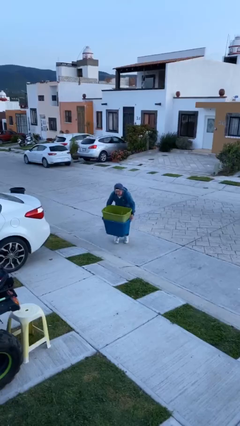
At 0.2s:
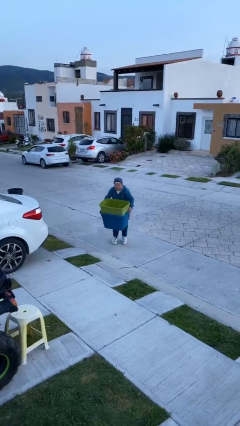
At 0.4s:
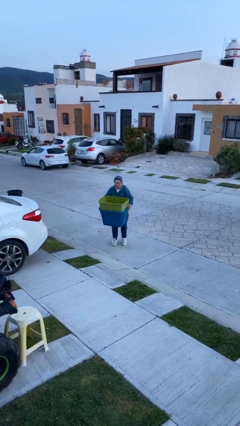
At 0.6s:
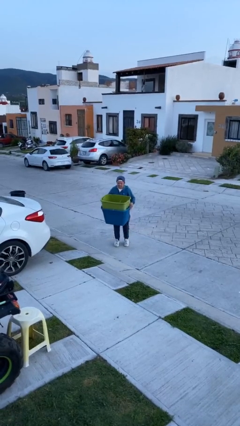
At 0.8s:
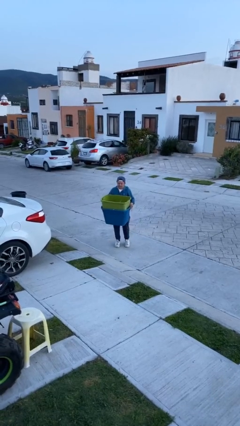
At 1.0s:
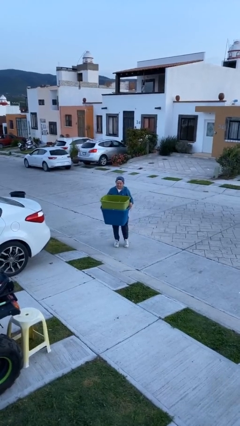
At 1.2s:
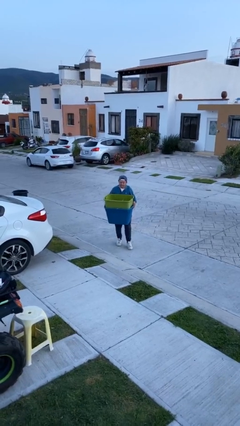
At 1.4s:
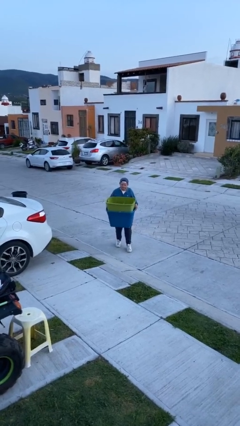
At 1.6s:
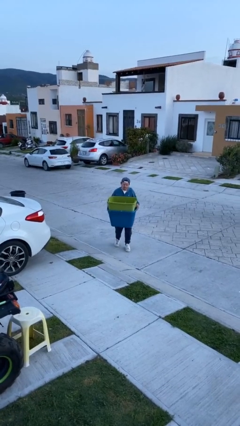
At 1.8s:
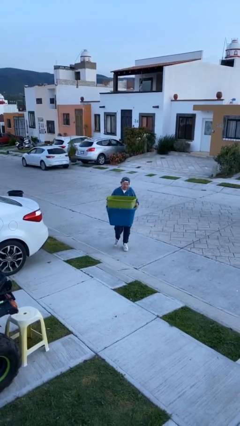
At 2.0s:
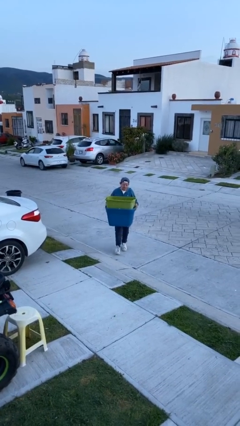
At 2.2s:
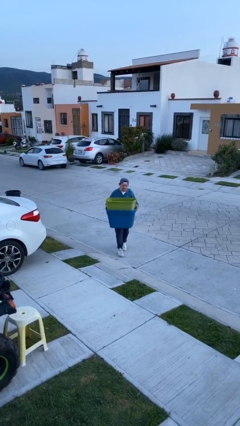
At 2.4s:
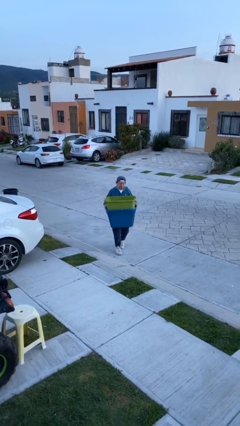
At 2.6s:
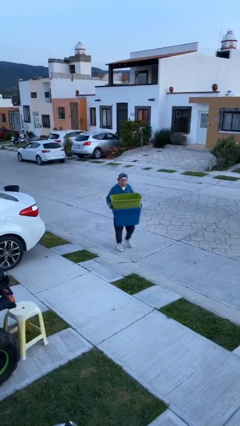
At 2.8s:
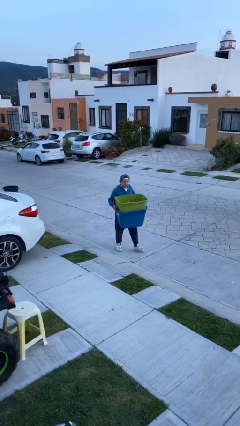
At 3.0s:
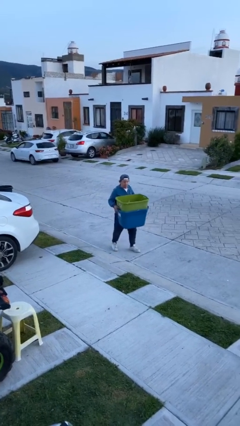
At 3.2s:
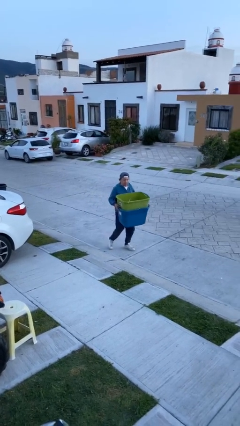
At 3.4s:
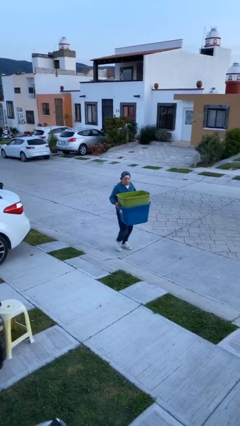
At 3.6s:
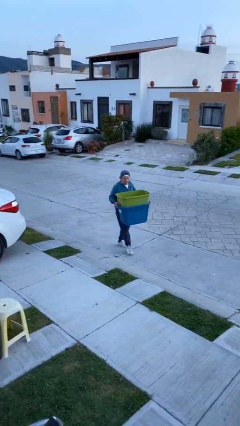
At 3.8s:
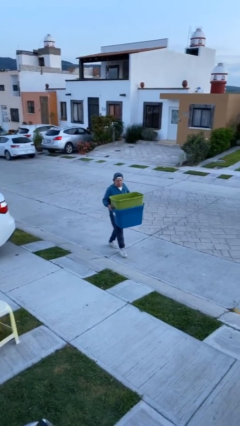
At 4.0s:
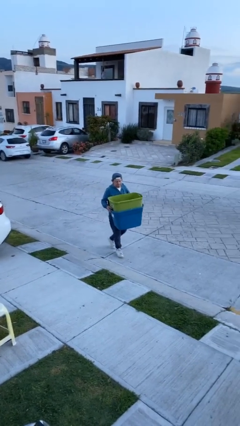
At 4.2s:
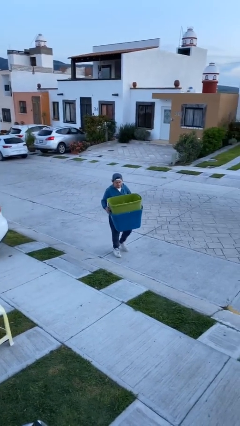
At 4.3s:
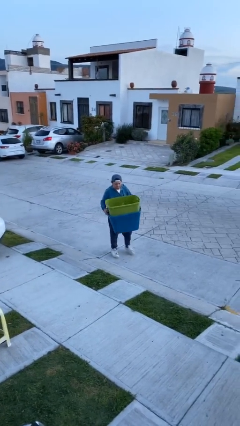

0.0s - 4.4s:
person carries heavy object

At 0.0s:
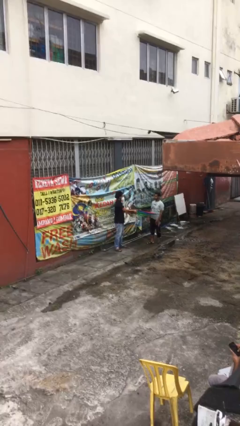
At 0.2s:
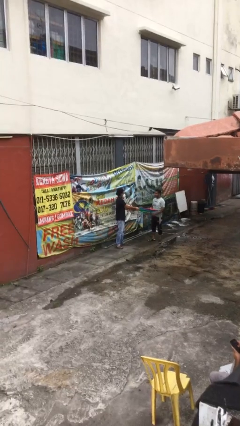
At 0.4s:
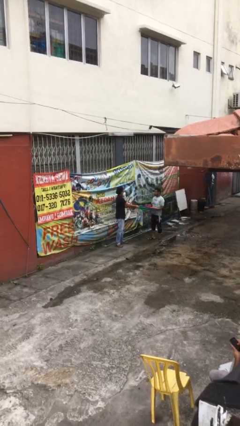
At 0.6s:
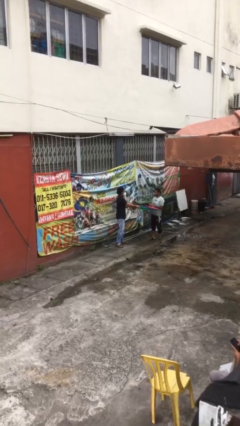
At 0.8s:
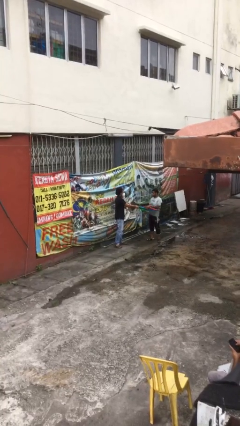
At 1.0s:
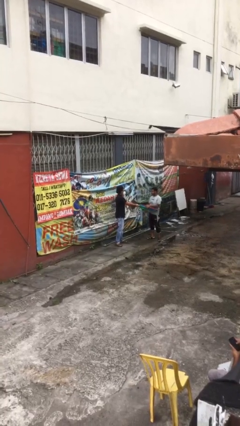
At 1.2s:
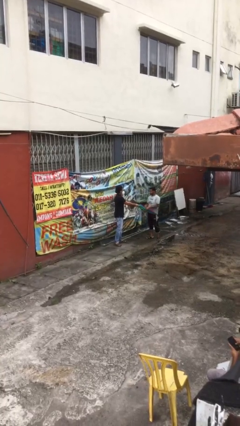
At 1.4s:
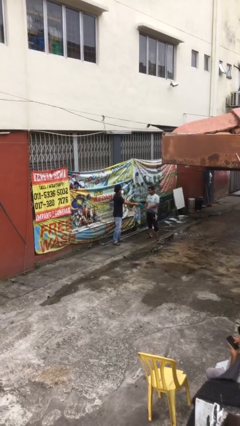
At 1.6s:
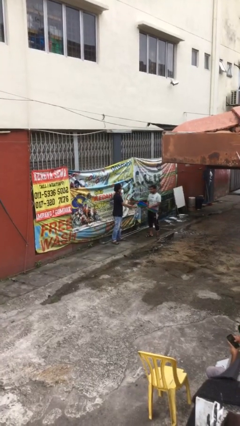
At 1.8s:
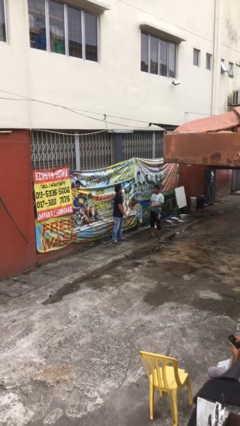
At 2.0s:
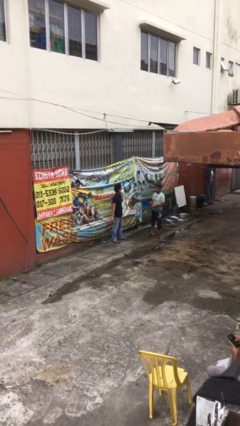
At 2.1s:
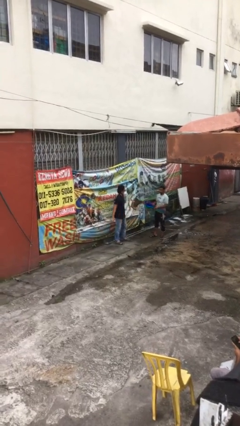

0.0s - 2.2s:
person transfers object to person

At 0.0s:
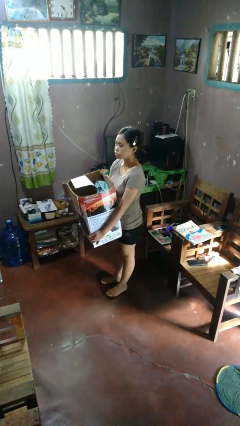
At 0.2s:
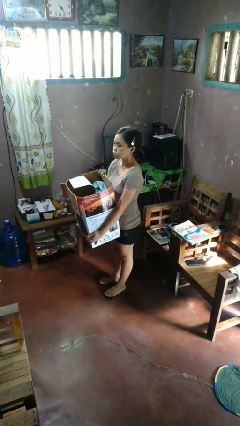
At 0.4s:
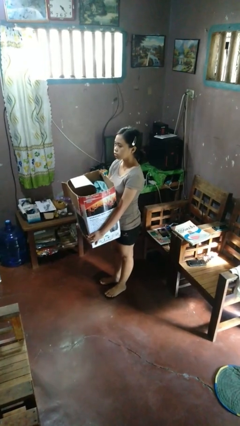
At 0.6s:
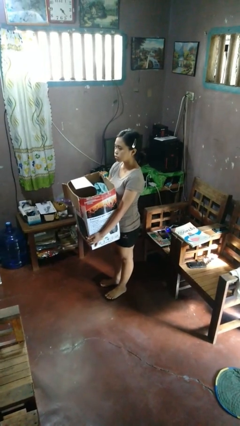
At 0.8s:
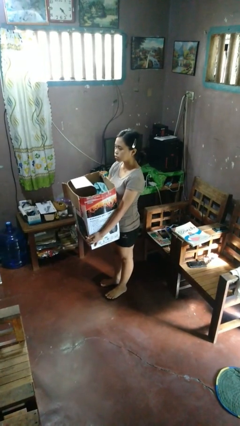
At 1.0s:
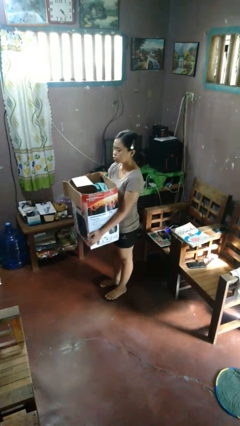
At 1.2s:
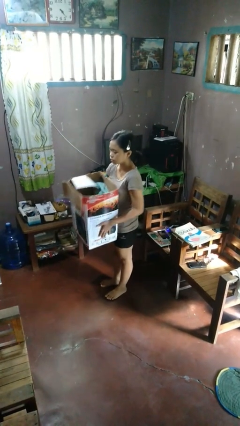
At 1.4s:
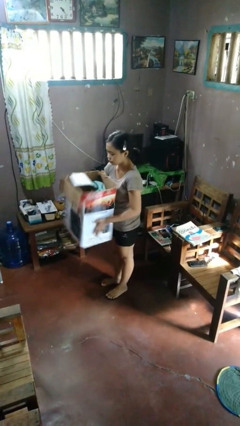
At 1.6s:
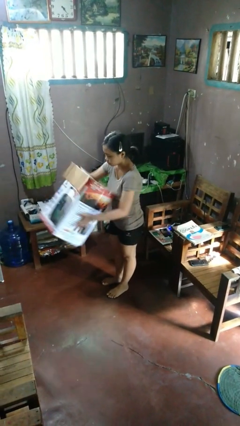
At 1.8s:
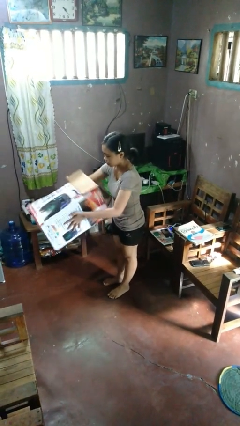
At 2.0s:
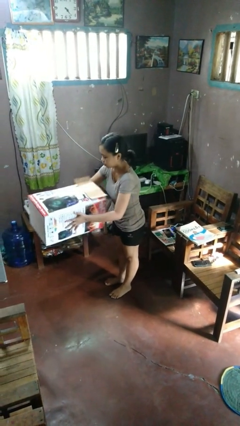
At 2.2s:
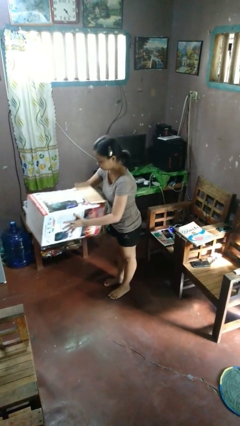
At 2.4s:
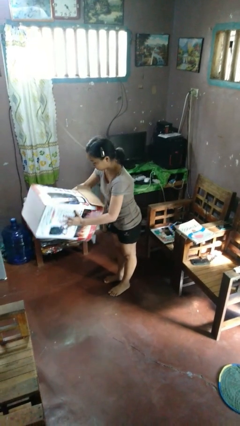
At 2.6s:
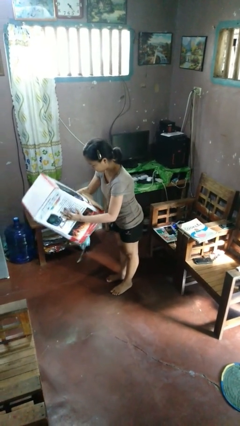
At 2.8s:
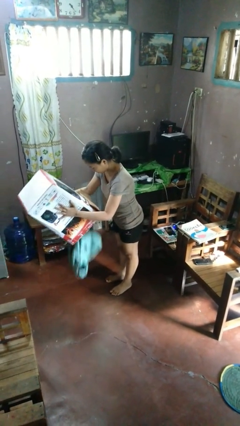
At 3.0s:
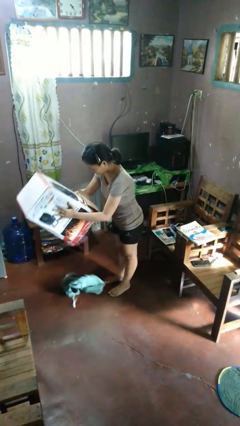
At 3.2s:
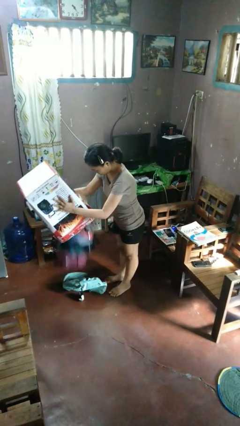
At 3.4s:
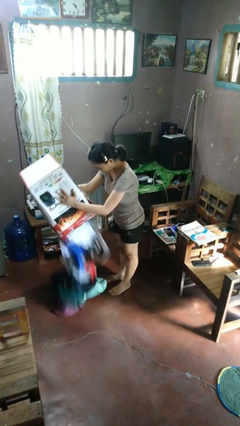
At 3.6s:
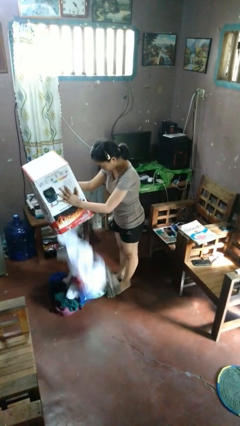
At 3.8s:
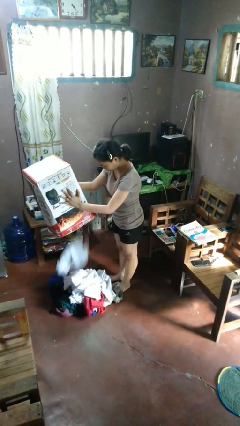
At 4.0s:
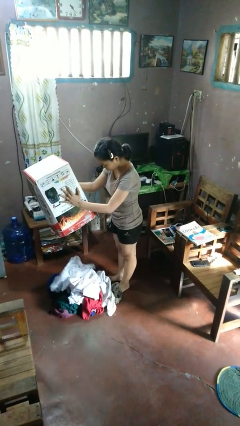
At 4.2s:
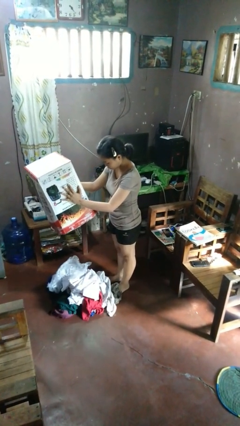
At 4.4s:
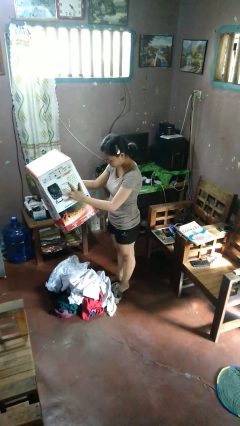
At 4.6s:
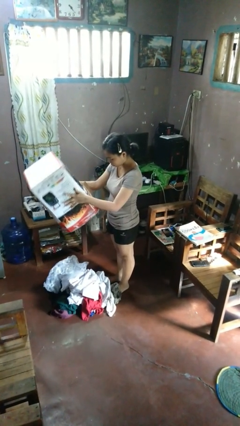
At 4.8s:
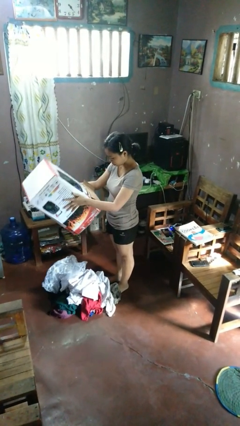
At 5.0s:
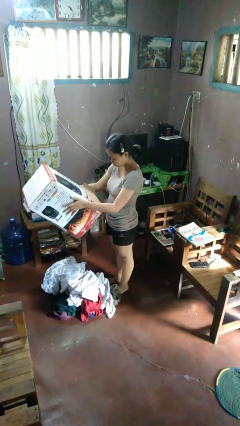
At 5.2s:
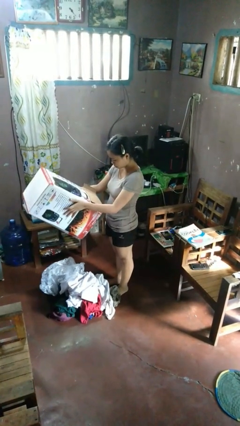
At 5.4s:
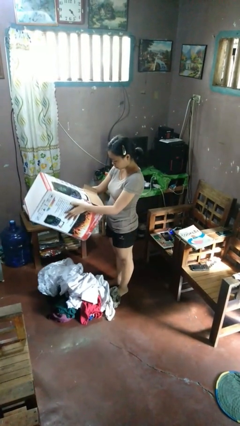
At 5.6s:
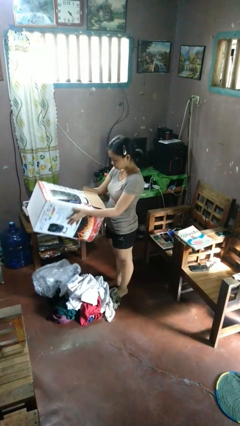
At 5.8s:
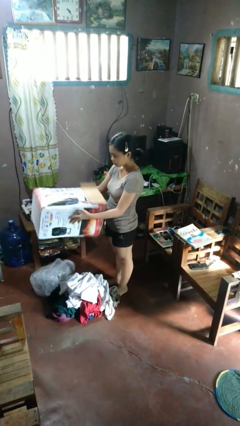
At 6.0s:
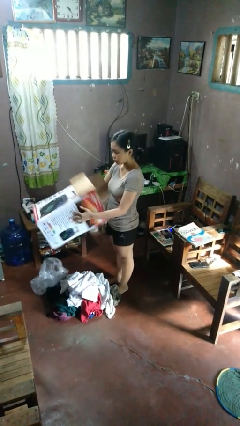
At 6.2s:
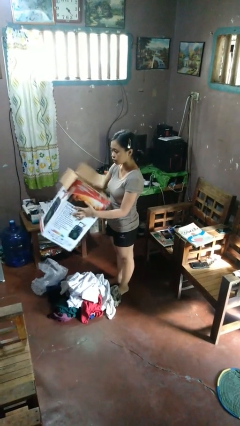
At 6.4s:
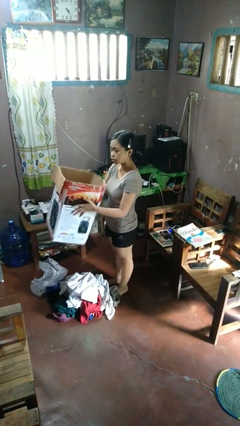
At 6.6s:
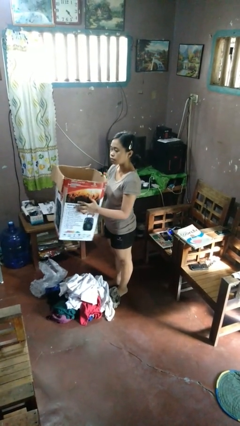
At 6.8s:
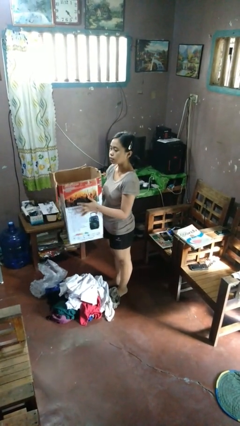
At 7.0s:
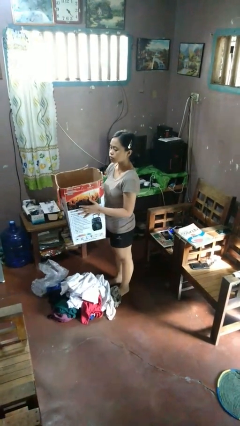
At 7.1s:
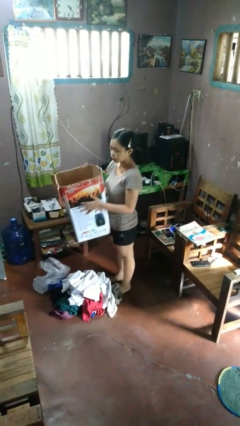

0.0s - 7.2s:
person unloads box onto floor

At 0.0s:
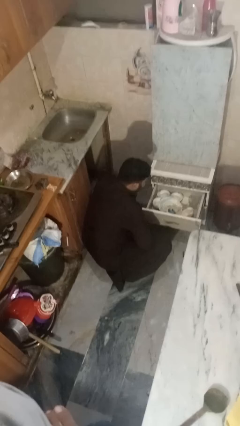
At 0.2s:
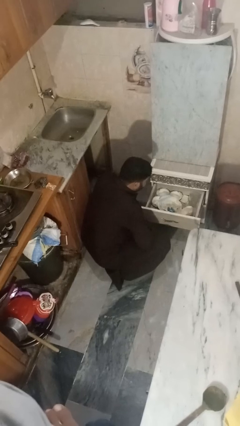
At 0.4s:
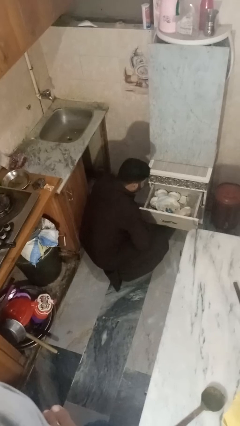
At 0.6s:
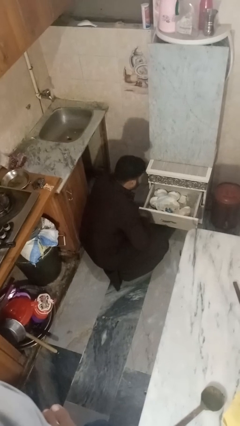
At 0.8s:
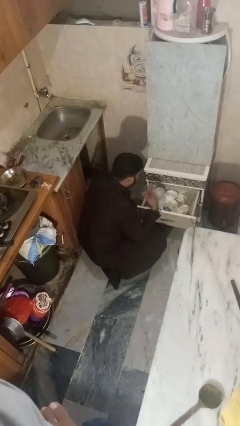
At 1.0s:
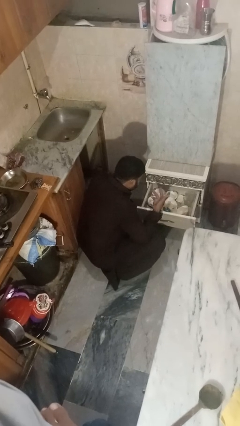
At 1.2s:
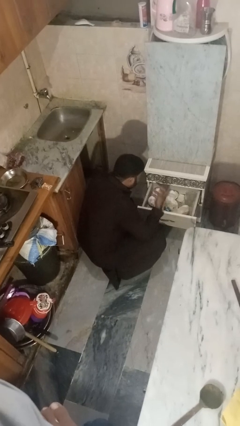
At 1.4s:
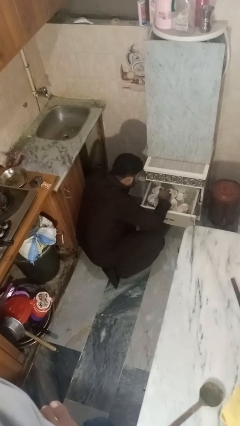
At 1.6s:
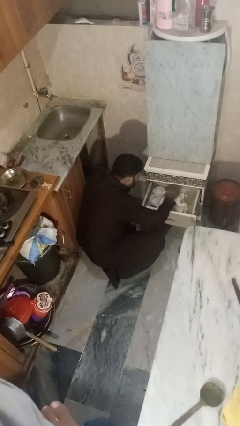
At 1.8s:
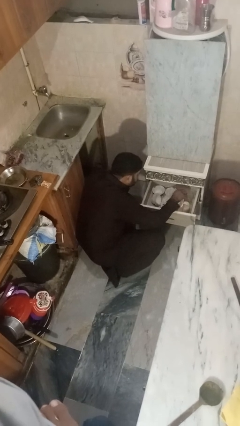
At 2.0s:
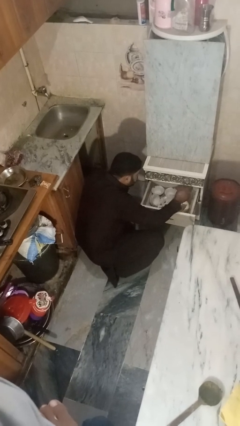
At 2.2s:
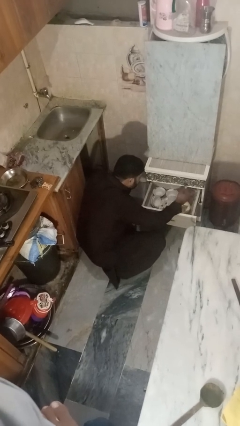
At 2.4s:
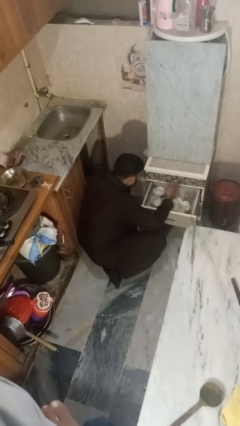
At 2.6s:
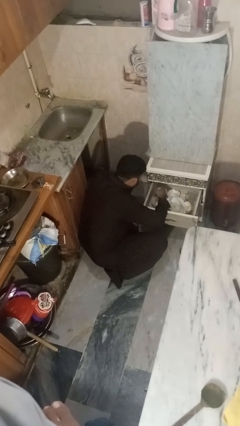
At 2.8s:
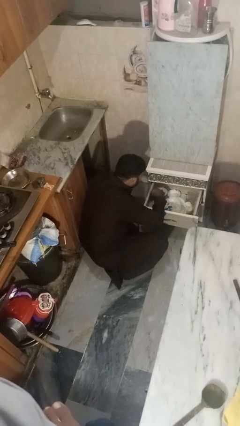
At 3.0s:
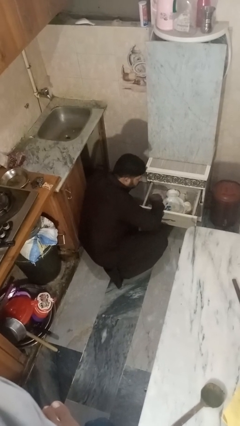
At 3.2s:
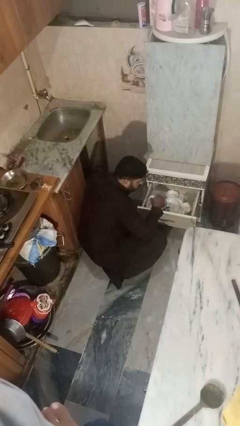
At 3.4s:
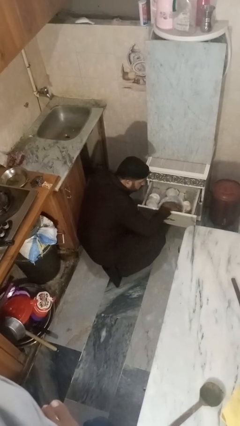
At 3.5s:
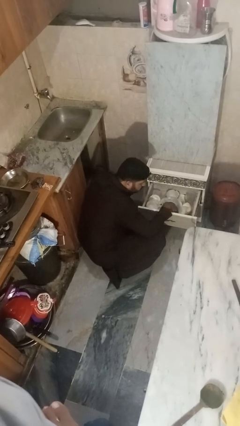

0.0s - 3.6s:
person searches in kitchen drawer

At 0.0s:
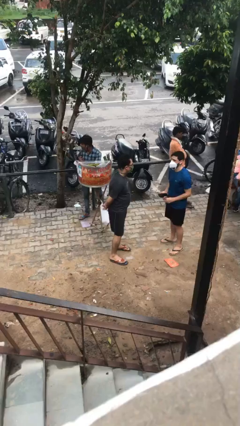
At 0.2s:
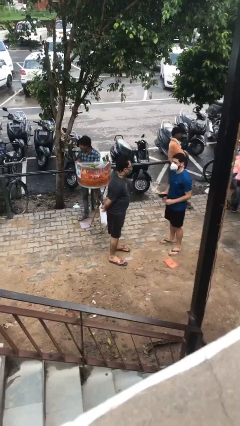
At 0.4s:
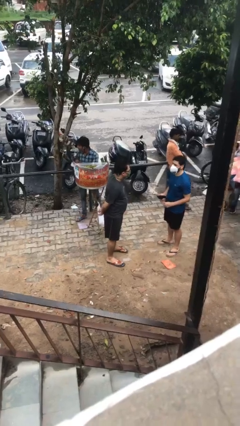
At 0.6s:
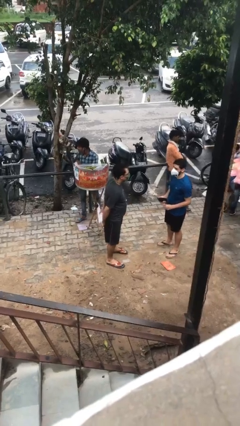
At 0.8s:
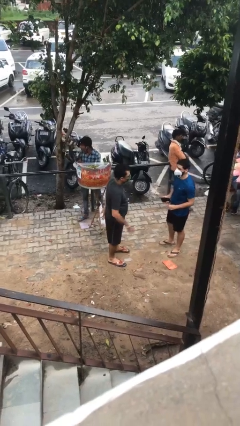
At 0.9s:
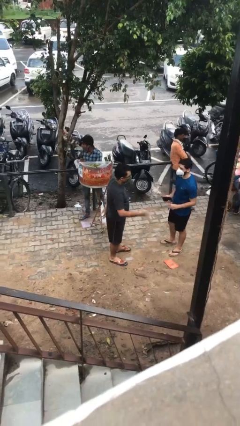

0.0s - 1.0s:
person talks to person
